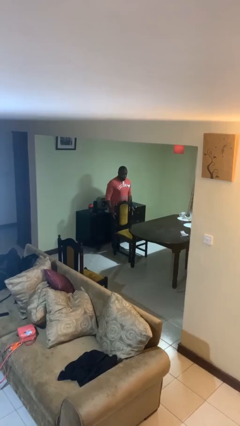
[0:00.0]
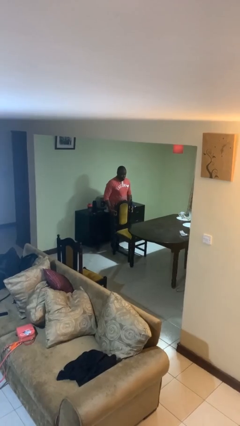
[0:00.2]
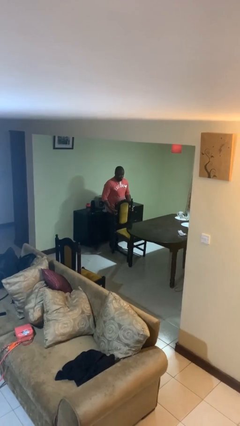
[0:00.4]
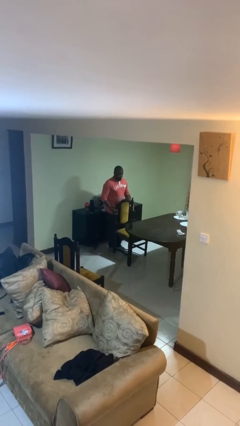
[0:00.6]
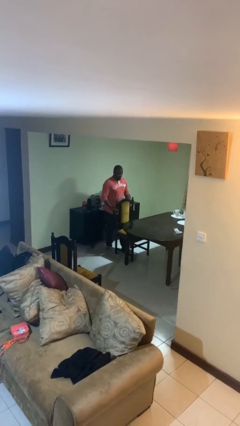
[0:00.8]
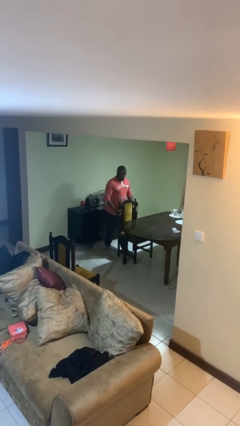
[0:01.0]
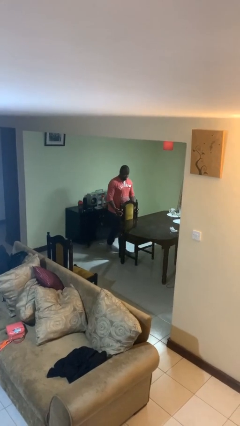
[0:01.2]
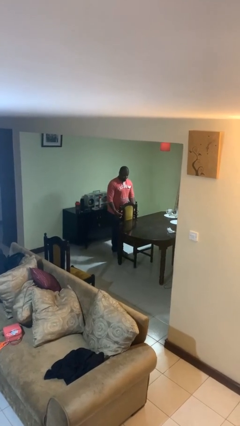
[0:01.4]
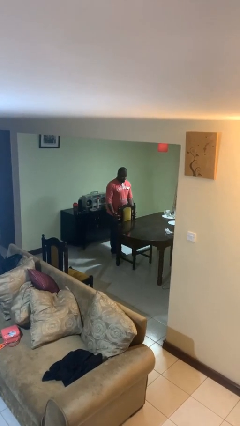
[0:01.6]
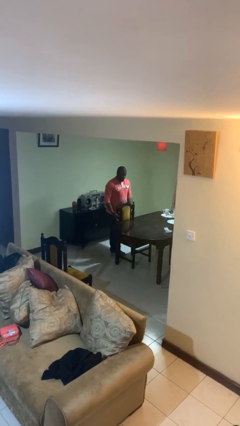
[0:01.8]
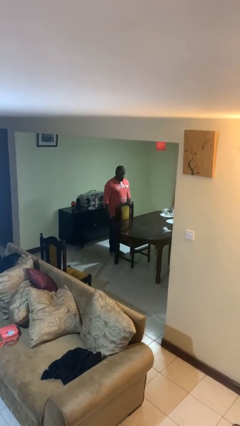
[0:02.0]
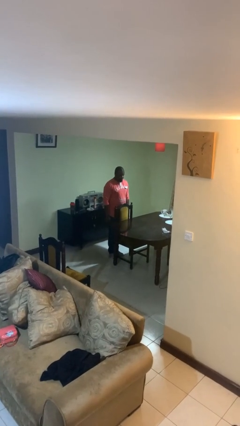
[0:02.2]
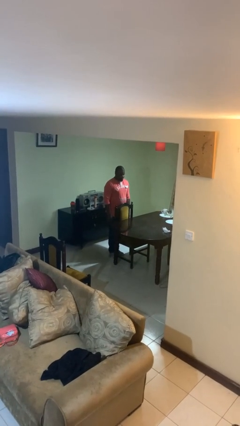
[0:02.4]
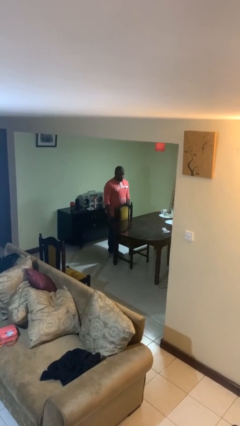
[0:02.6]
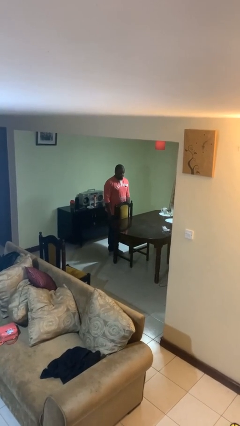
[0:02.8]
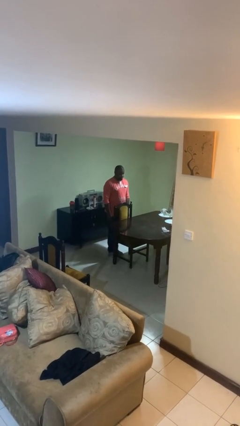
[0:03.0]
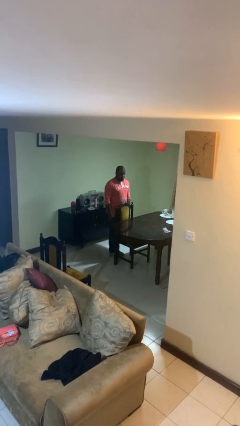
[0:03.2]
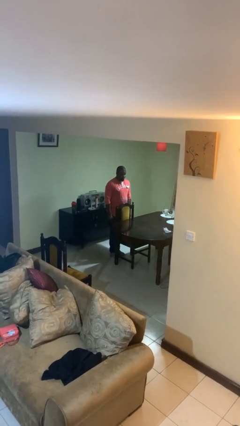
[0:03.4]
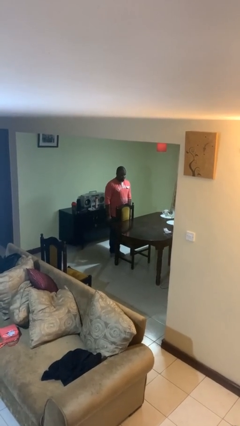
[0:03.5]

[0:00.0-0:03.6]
person pushes in chair

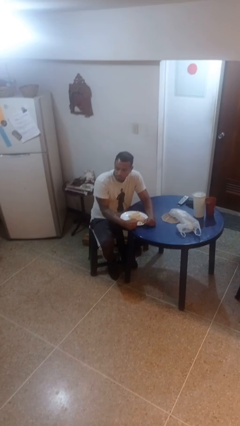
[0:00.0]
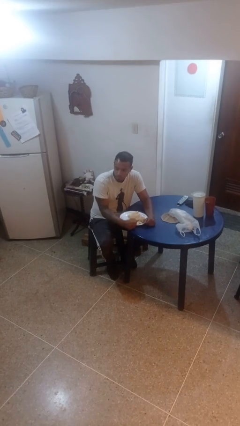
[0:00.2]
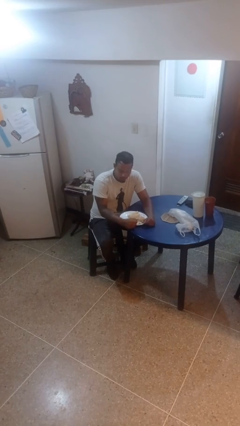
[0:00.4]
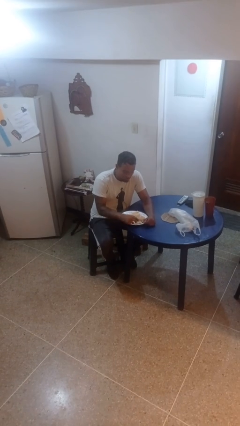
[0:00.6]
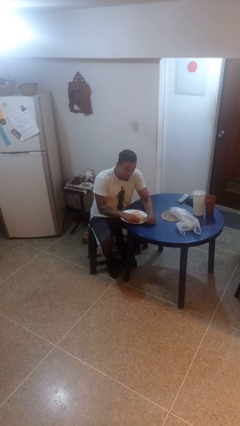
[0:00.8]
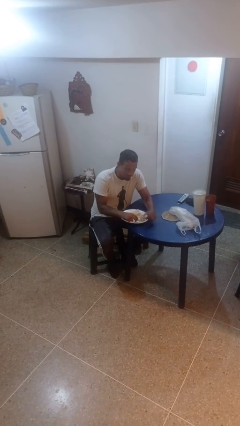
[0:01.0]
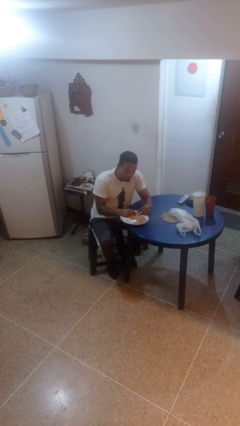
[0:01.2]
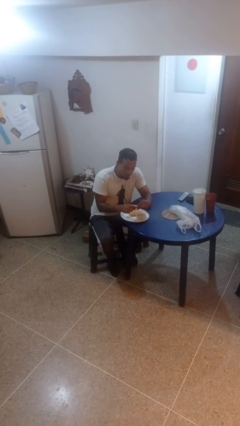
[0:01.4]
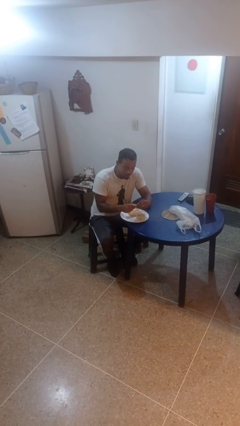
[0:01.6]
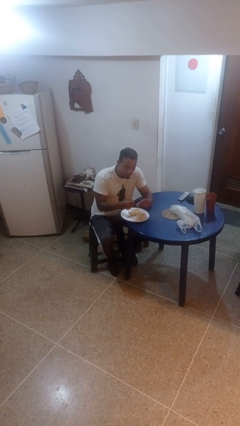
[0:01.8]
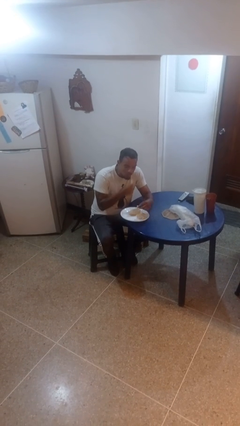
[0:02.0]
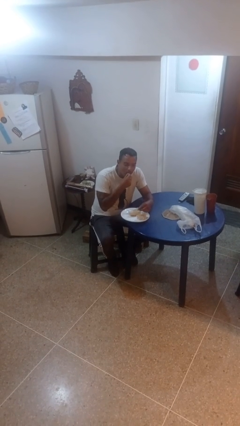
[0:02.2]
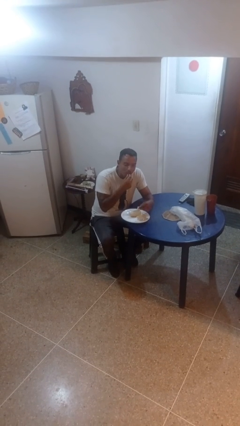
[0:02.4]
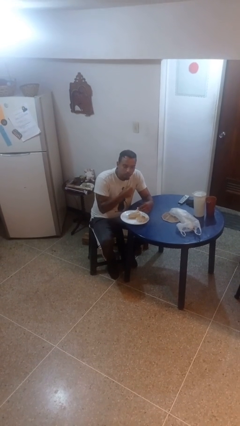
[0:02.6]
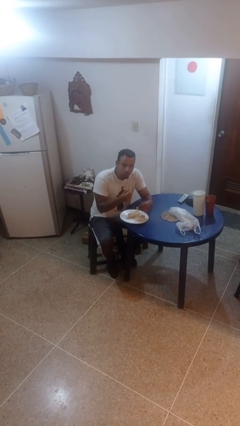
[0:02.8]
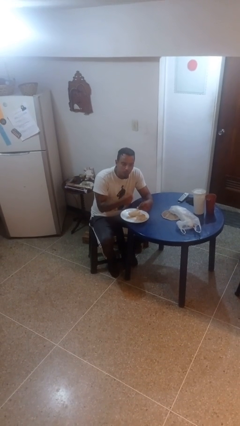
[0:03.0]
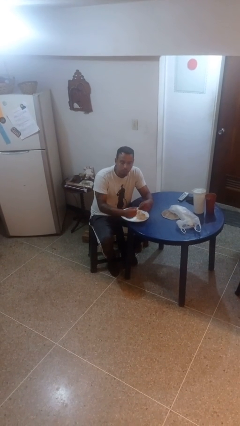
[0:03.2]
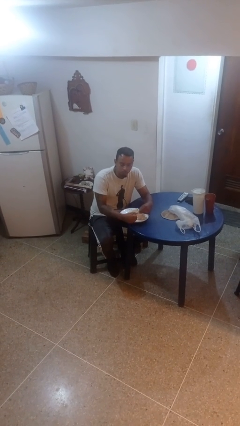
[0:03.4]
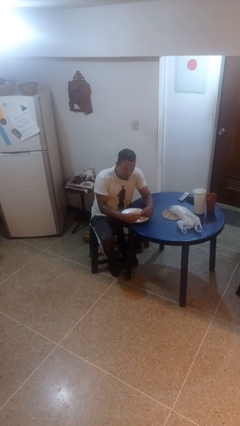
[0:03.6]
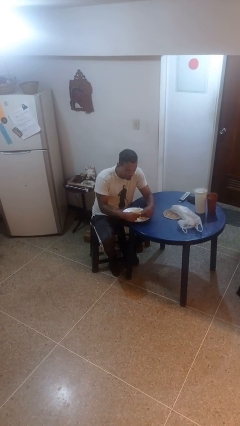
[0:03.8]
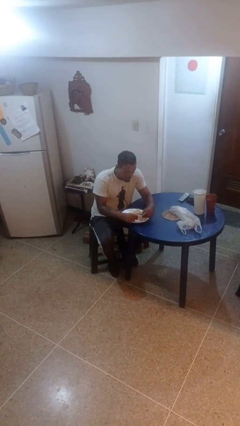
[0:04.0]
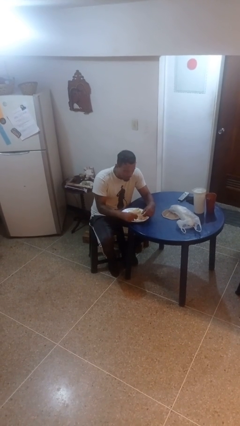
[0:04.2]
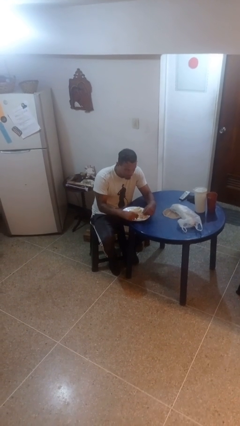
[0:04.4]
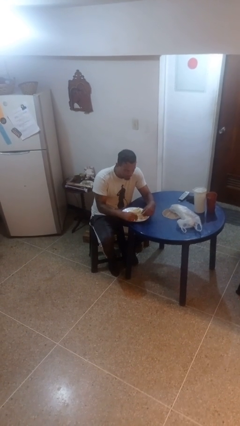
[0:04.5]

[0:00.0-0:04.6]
person eats with hands

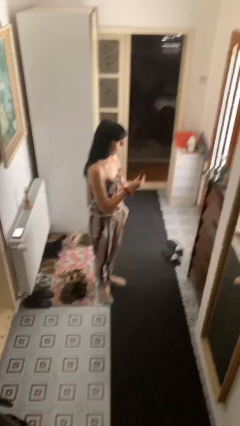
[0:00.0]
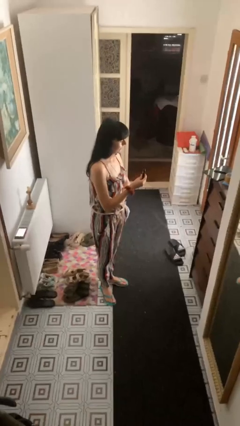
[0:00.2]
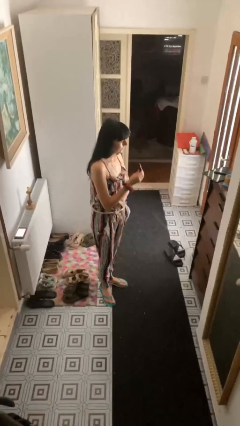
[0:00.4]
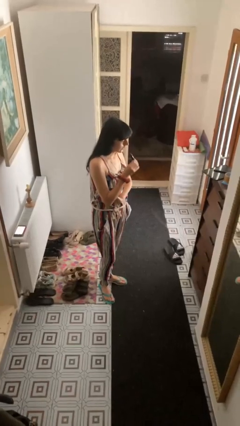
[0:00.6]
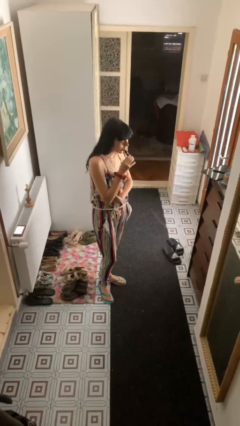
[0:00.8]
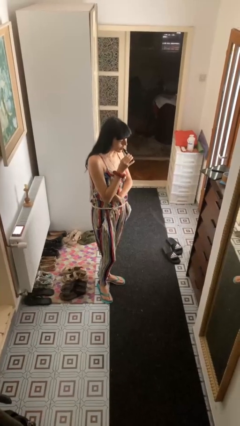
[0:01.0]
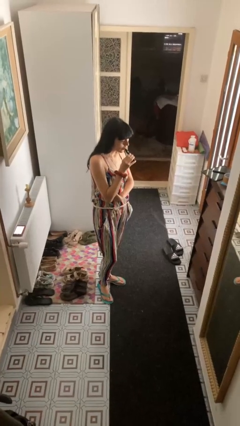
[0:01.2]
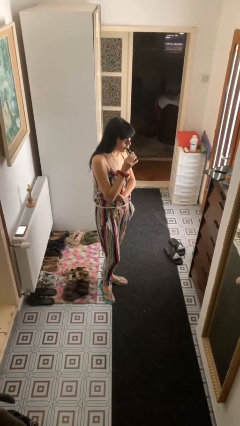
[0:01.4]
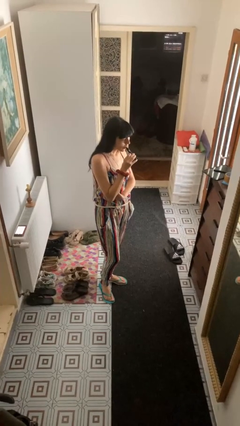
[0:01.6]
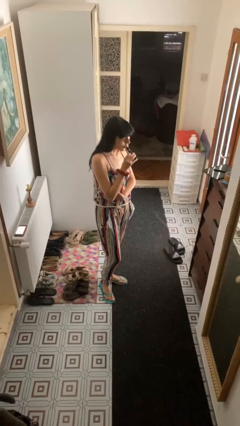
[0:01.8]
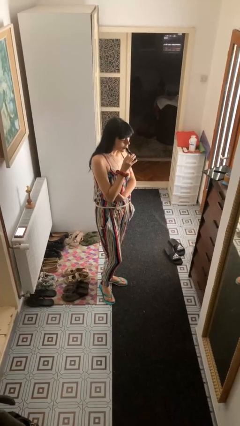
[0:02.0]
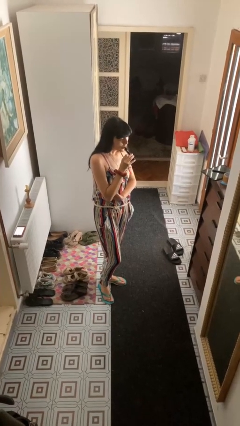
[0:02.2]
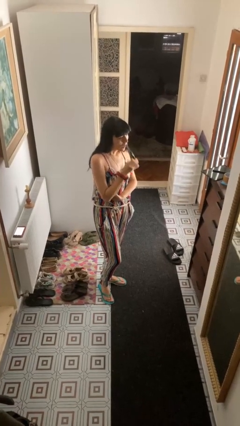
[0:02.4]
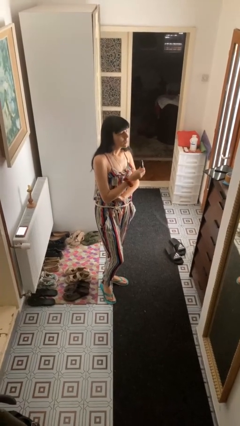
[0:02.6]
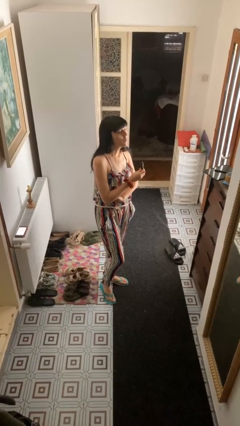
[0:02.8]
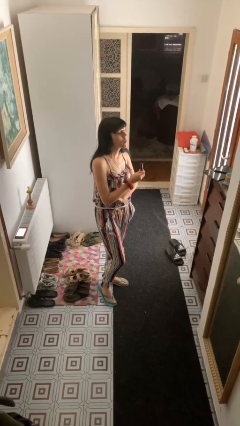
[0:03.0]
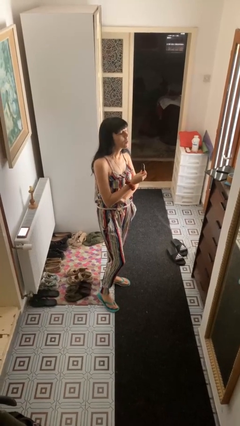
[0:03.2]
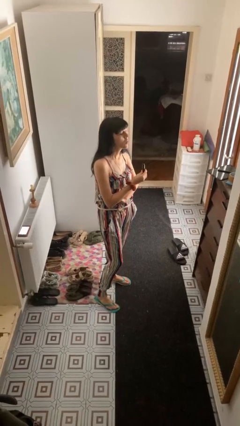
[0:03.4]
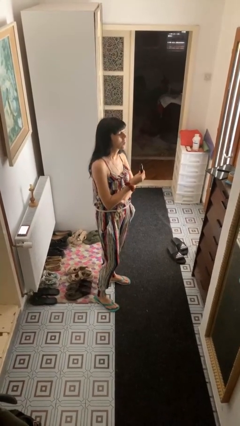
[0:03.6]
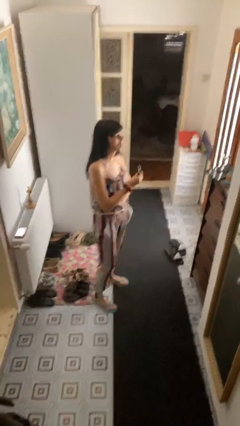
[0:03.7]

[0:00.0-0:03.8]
person vapes

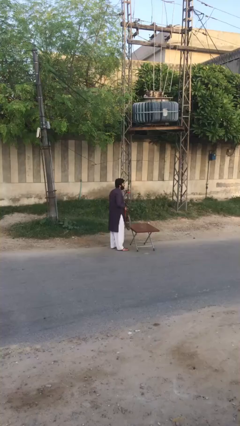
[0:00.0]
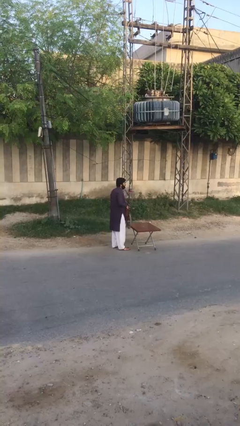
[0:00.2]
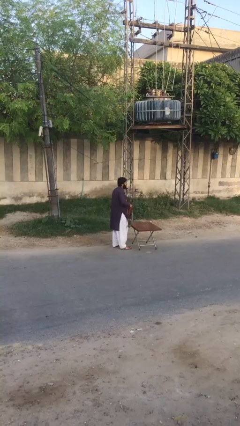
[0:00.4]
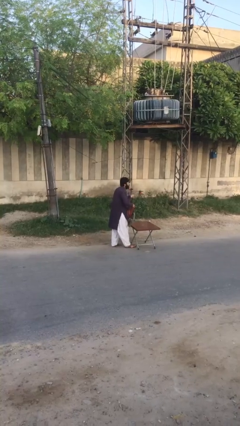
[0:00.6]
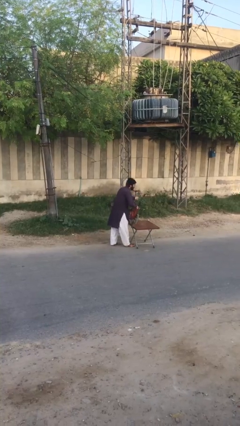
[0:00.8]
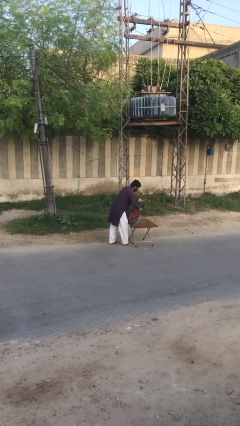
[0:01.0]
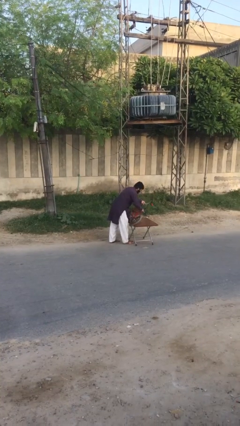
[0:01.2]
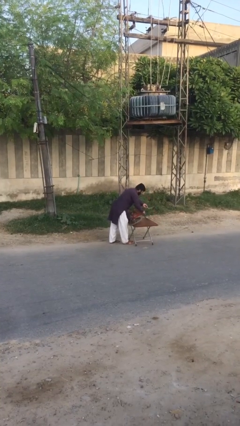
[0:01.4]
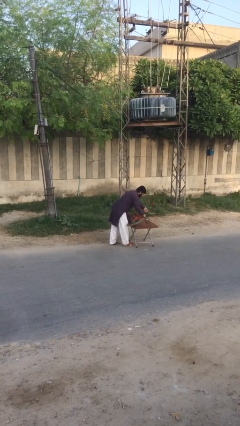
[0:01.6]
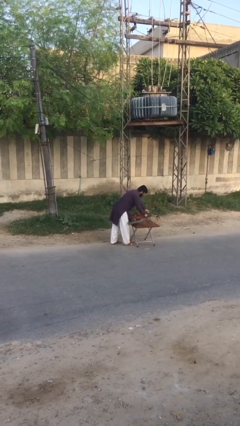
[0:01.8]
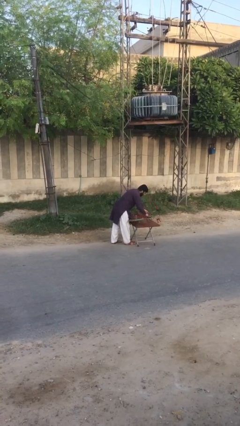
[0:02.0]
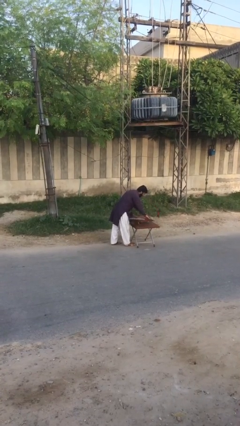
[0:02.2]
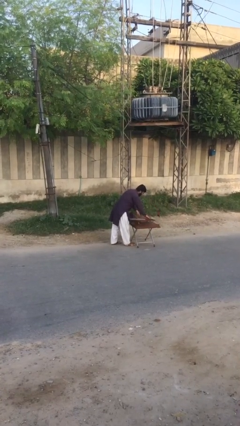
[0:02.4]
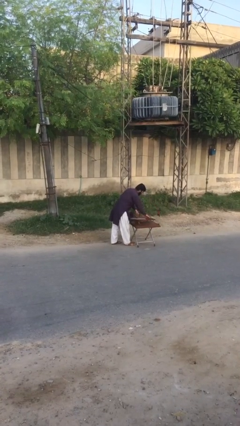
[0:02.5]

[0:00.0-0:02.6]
person puts down object on table

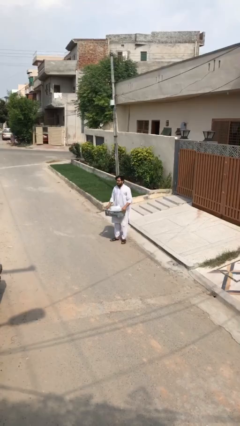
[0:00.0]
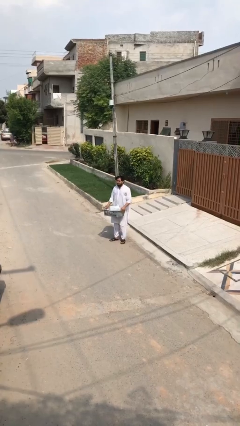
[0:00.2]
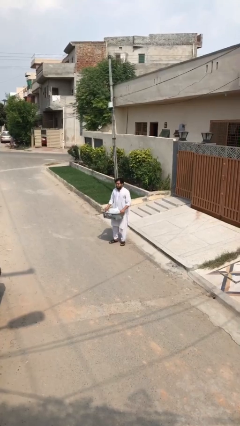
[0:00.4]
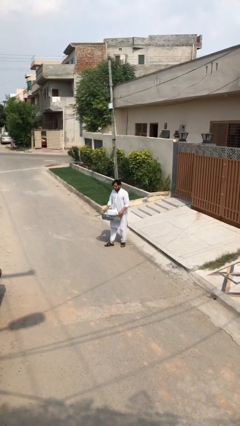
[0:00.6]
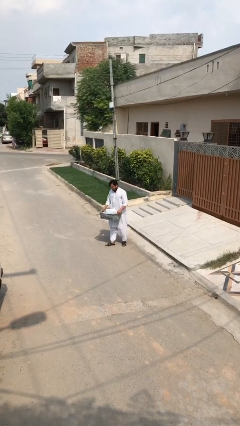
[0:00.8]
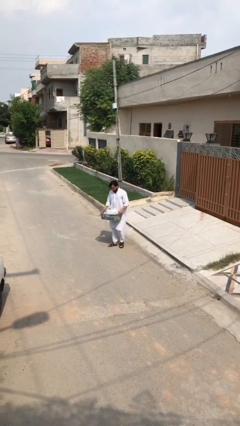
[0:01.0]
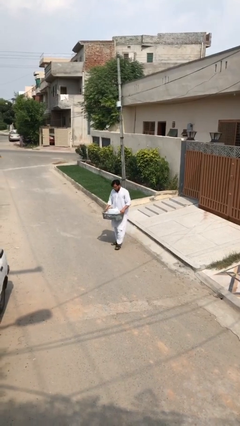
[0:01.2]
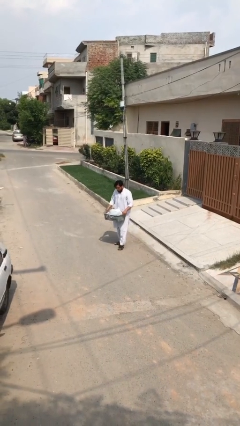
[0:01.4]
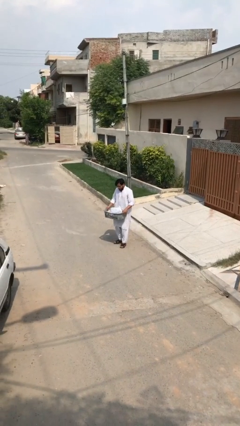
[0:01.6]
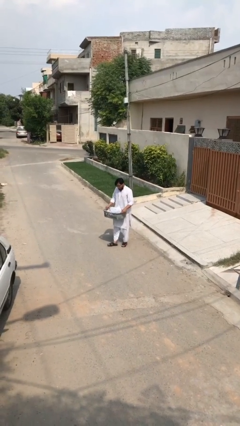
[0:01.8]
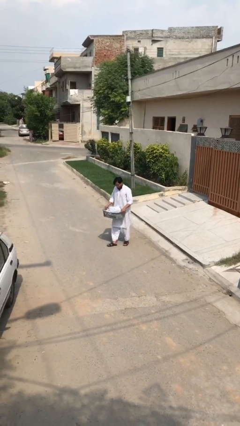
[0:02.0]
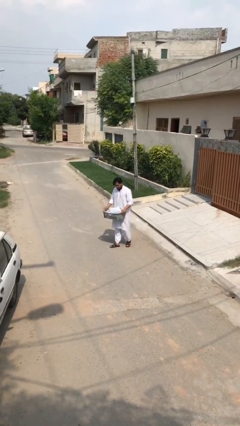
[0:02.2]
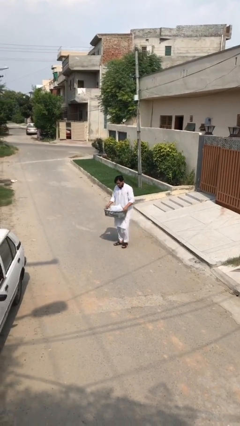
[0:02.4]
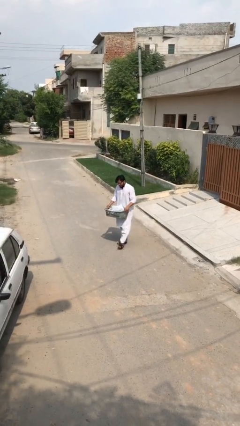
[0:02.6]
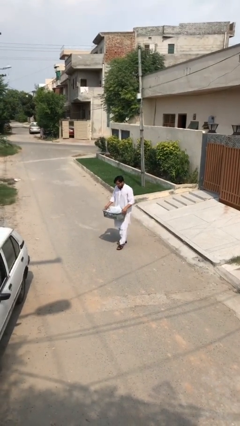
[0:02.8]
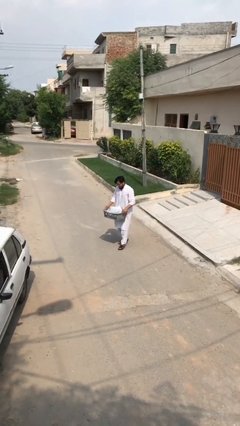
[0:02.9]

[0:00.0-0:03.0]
person carries heavy object
